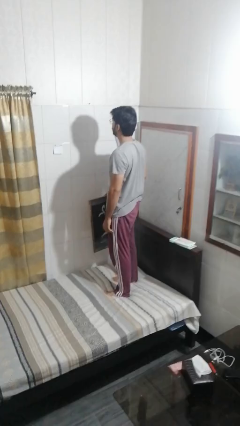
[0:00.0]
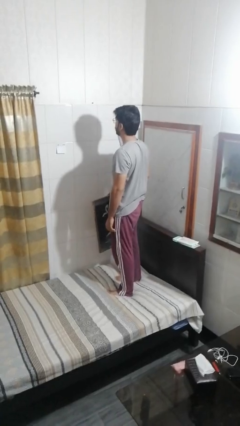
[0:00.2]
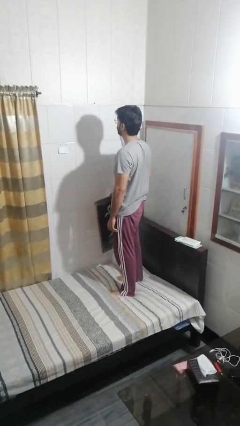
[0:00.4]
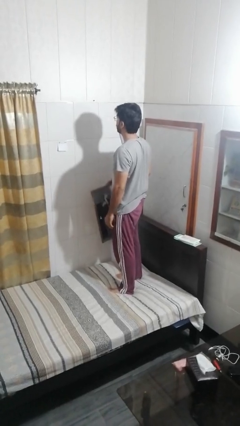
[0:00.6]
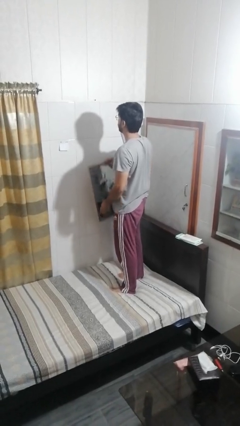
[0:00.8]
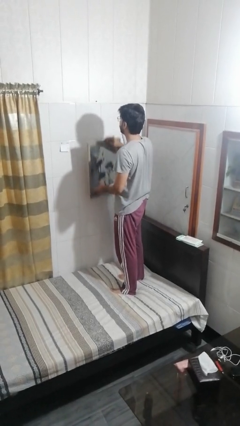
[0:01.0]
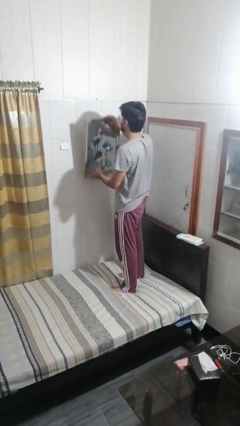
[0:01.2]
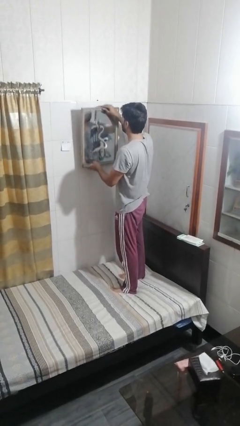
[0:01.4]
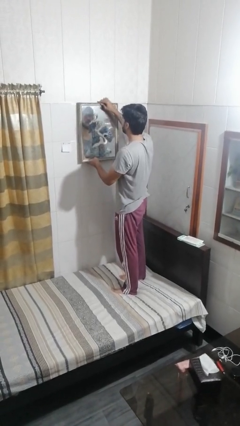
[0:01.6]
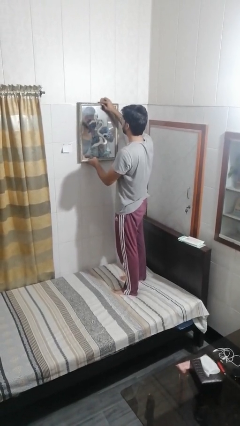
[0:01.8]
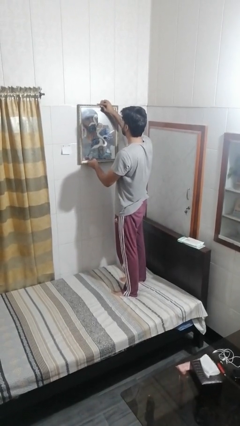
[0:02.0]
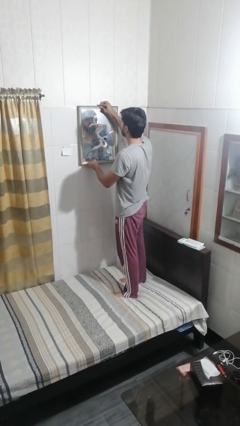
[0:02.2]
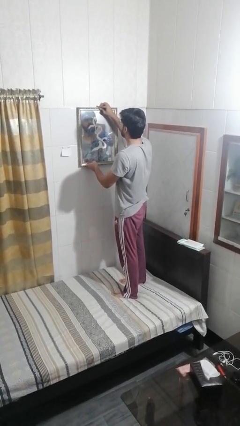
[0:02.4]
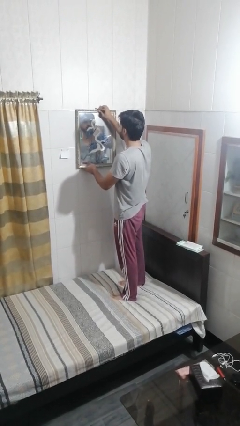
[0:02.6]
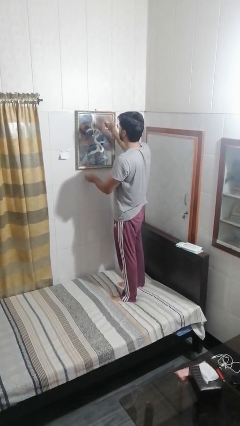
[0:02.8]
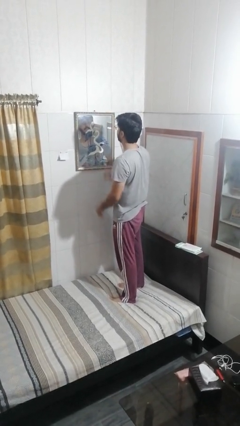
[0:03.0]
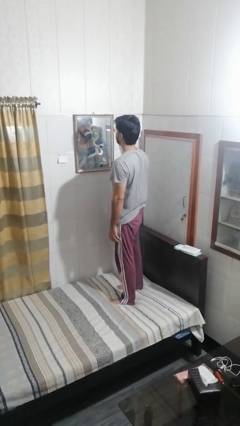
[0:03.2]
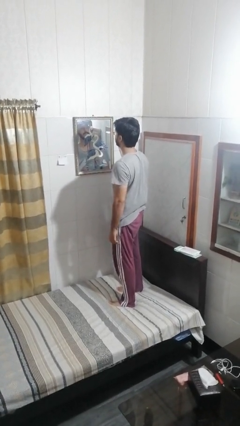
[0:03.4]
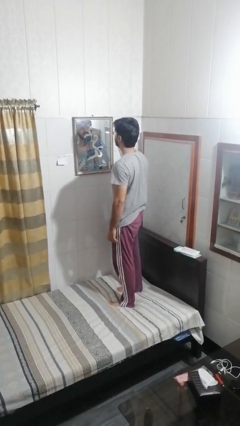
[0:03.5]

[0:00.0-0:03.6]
person puts up picture frame

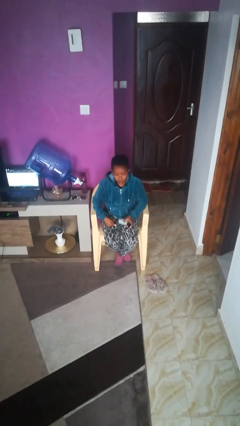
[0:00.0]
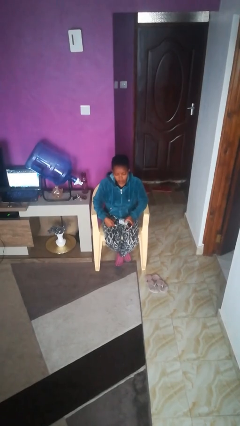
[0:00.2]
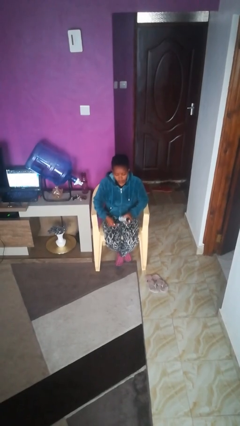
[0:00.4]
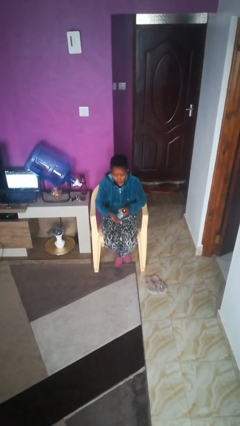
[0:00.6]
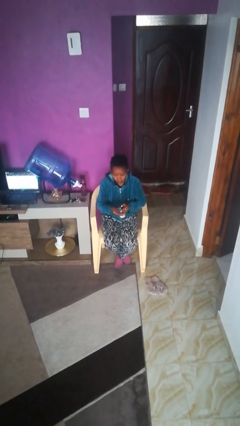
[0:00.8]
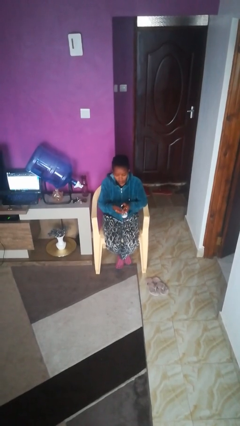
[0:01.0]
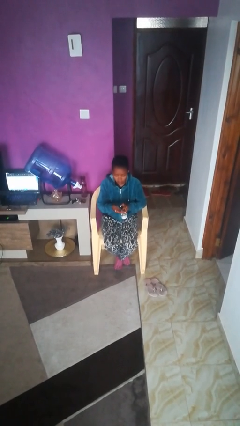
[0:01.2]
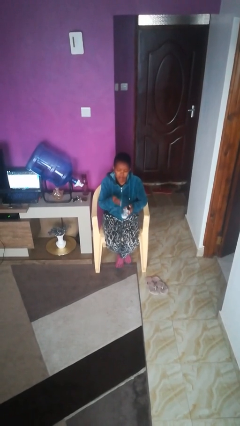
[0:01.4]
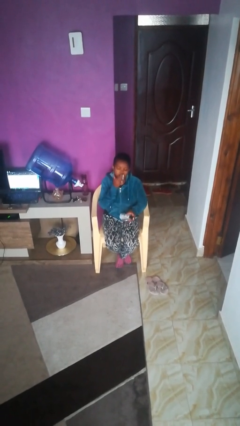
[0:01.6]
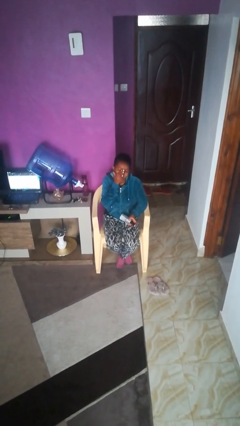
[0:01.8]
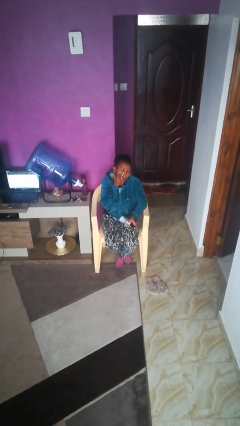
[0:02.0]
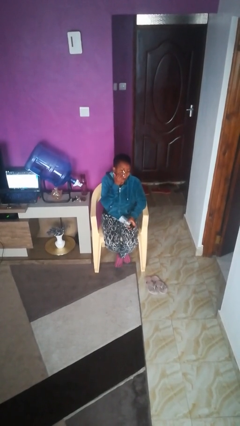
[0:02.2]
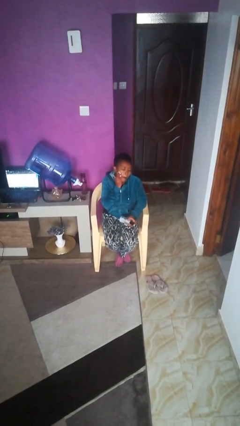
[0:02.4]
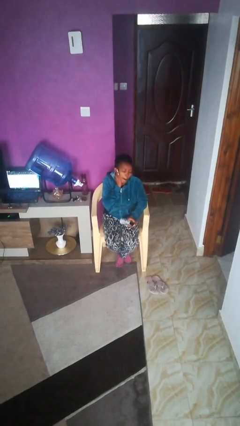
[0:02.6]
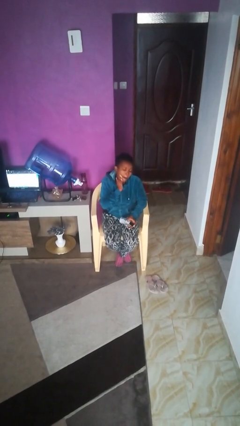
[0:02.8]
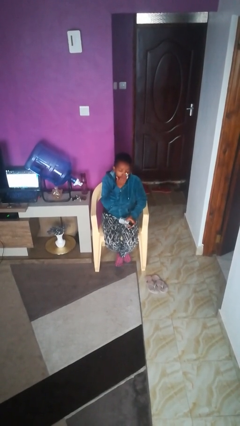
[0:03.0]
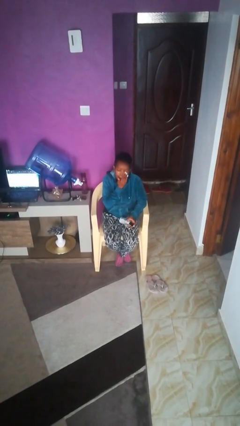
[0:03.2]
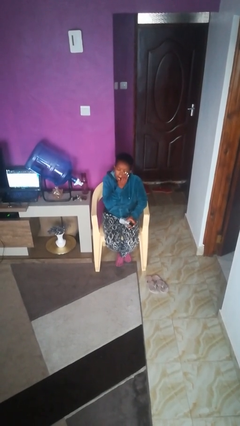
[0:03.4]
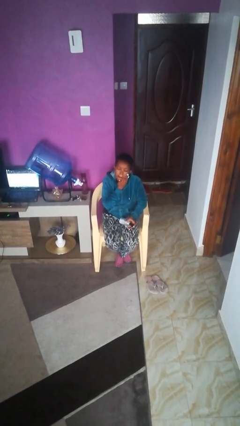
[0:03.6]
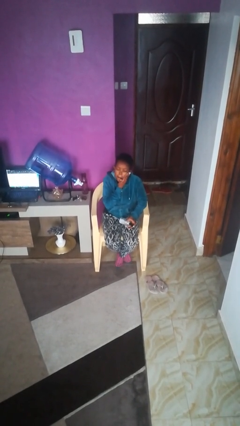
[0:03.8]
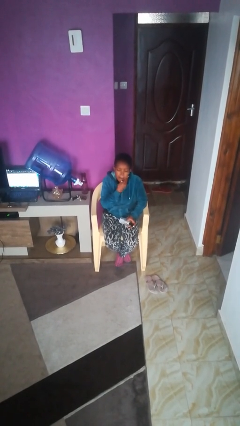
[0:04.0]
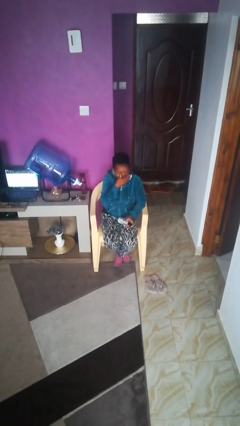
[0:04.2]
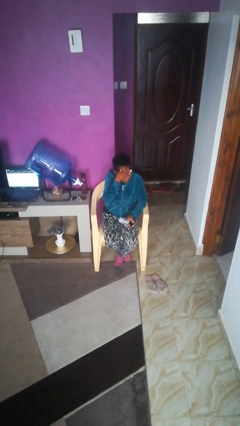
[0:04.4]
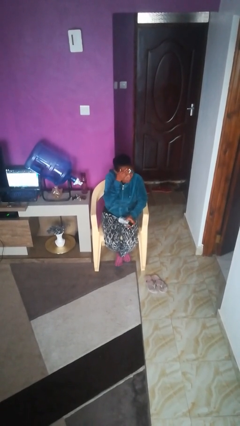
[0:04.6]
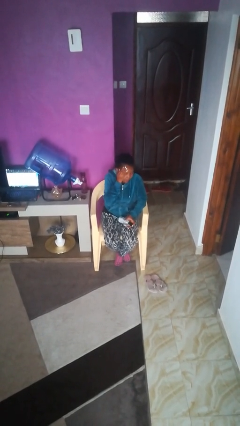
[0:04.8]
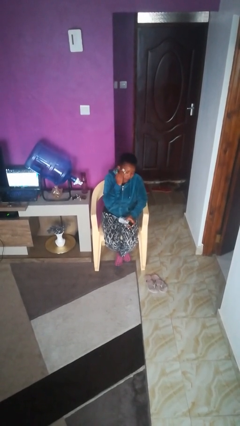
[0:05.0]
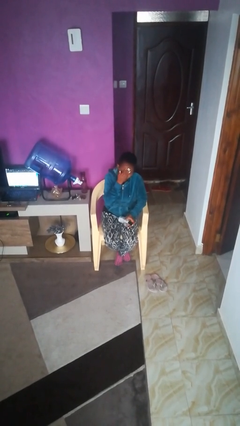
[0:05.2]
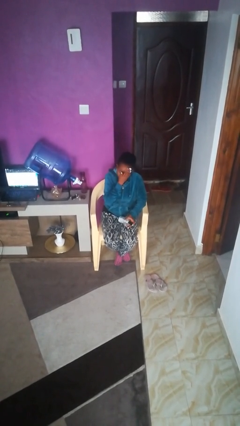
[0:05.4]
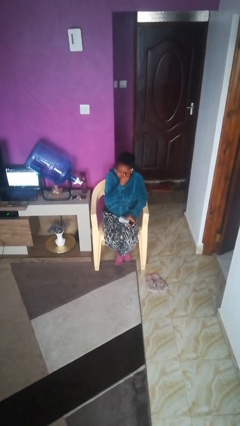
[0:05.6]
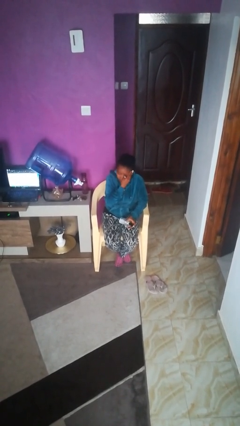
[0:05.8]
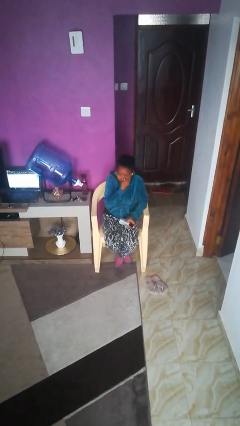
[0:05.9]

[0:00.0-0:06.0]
person applies facial moisturizer

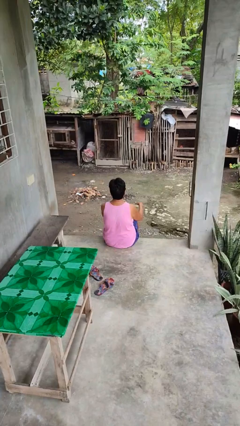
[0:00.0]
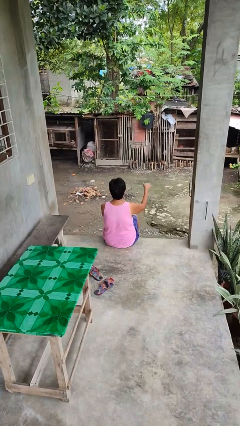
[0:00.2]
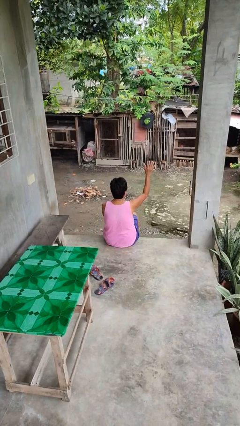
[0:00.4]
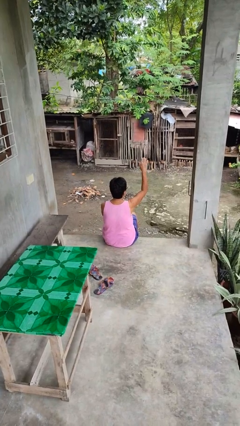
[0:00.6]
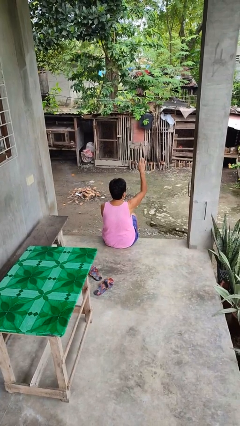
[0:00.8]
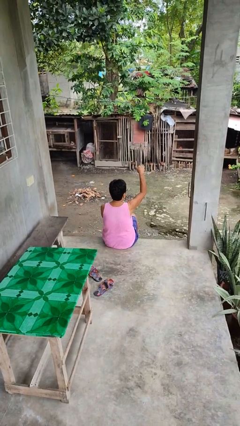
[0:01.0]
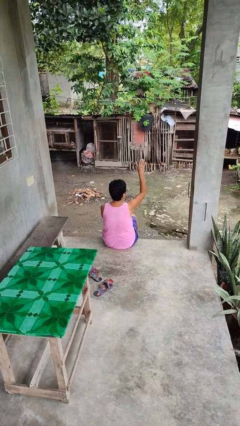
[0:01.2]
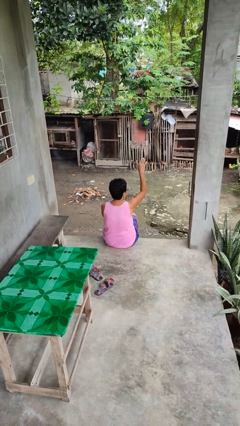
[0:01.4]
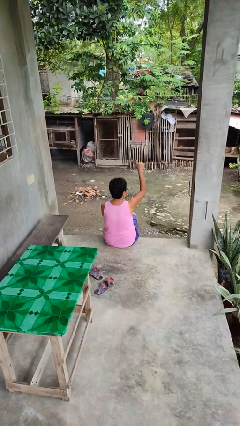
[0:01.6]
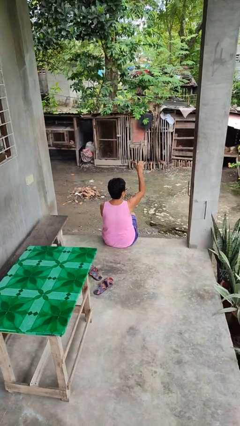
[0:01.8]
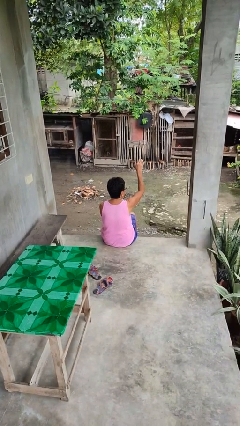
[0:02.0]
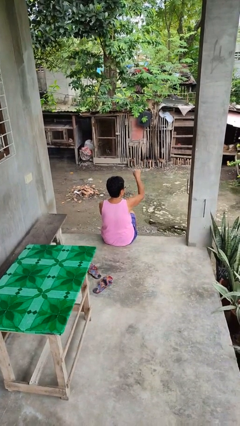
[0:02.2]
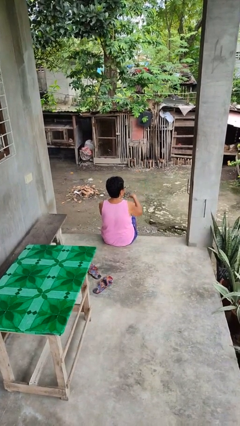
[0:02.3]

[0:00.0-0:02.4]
person gestures come here

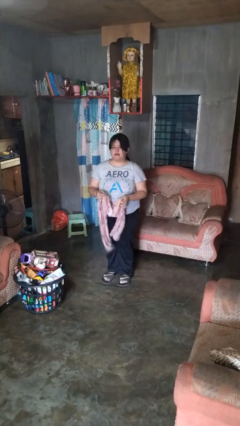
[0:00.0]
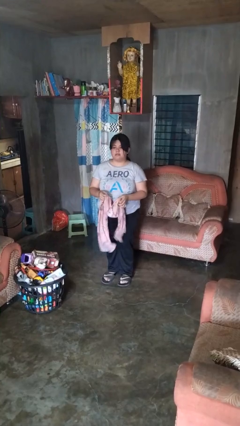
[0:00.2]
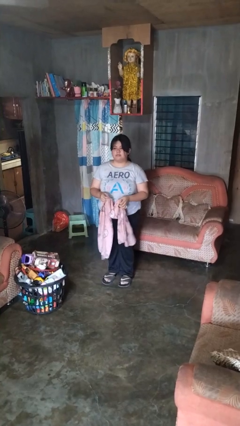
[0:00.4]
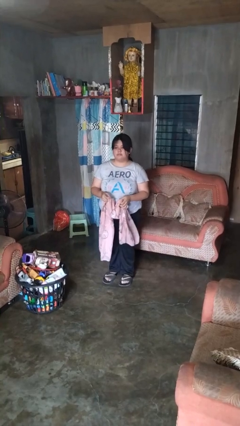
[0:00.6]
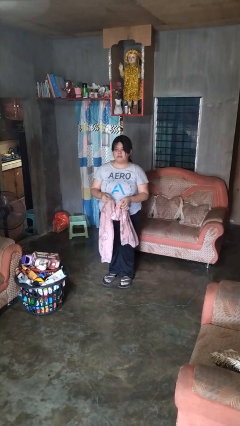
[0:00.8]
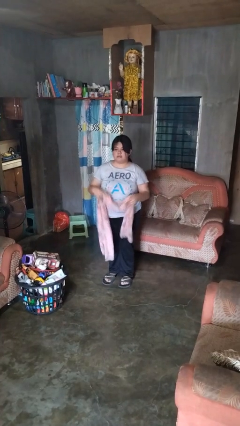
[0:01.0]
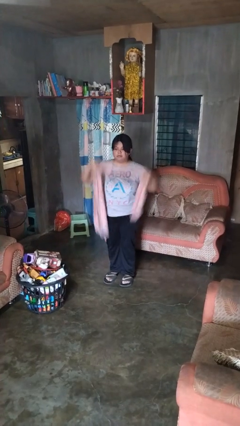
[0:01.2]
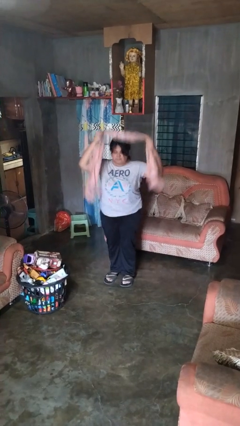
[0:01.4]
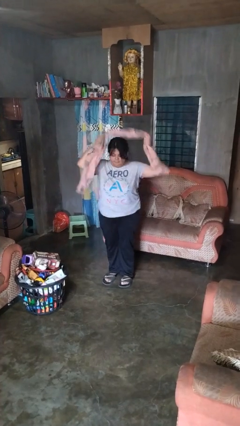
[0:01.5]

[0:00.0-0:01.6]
person puts on scarf

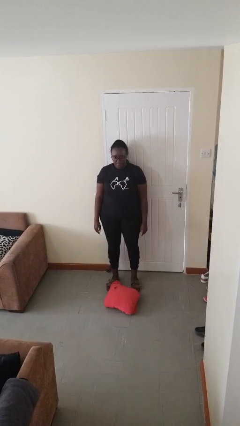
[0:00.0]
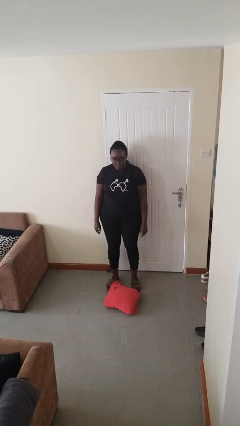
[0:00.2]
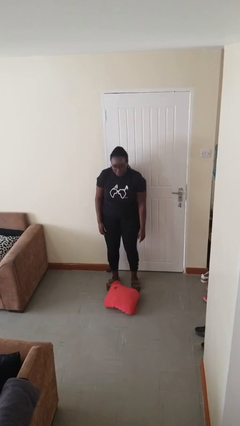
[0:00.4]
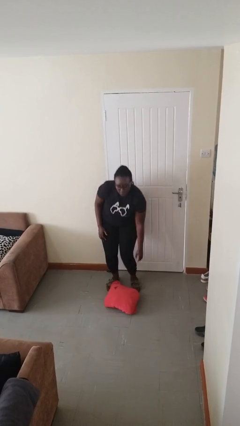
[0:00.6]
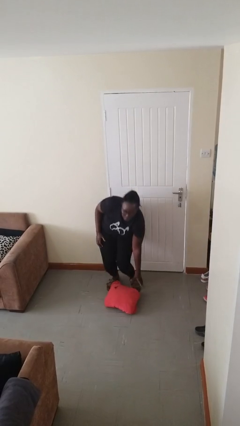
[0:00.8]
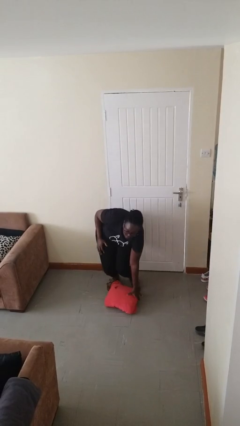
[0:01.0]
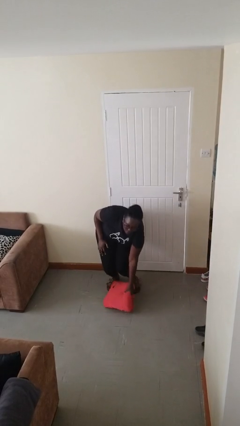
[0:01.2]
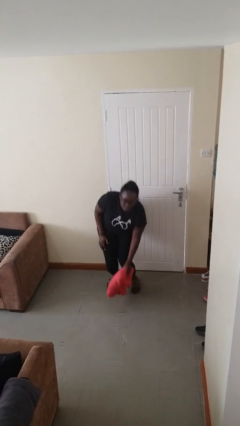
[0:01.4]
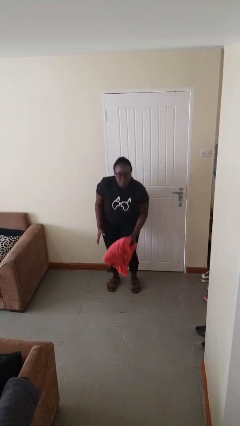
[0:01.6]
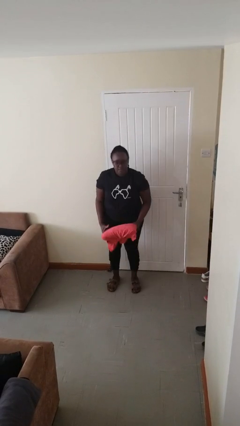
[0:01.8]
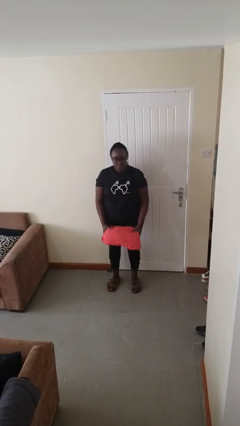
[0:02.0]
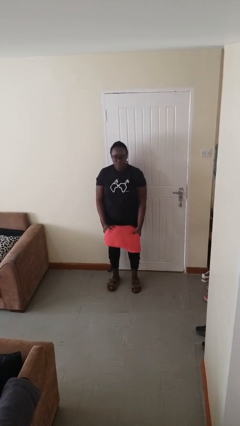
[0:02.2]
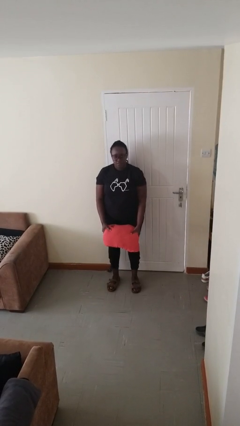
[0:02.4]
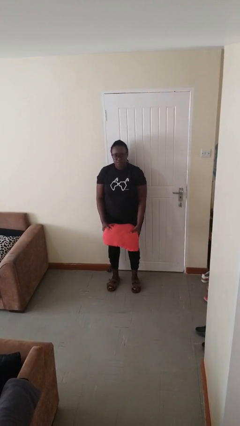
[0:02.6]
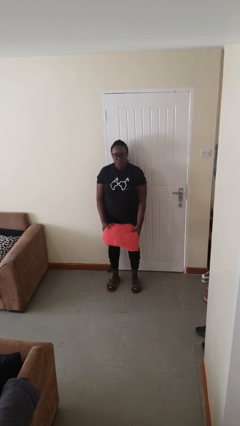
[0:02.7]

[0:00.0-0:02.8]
person picks up object from floor

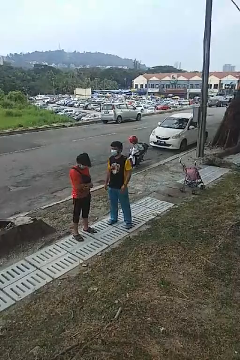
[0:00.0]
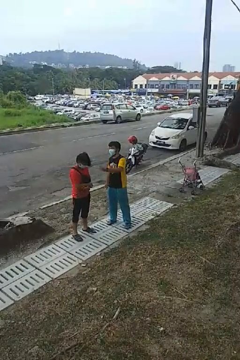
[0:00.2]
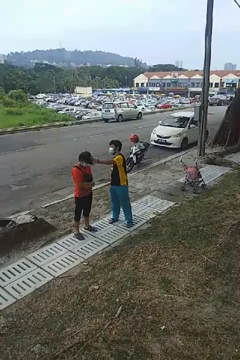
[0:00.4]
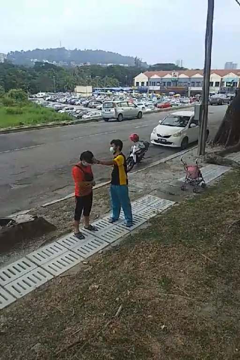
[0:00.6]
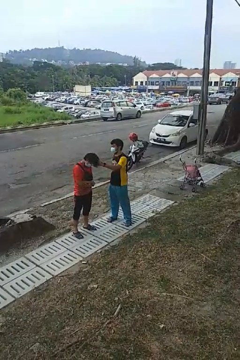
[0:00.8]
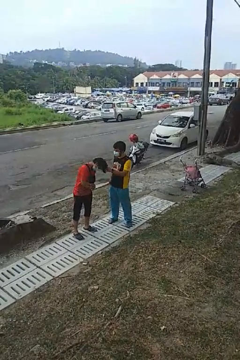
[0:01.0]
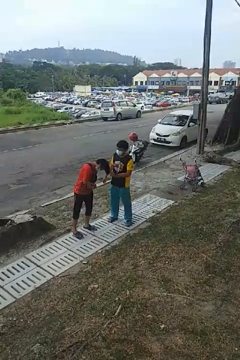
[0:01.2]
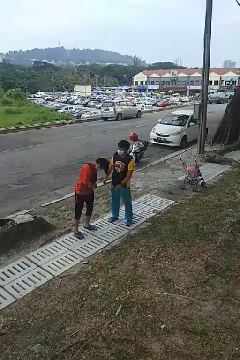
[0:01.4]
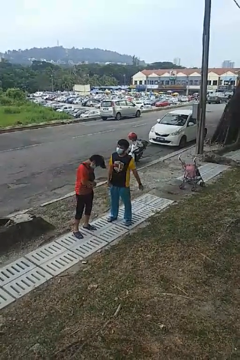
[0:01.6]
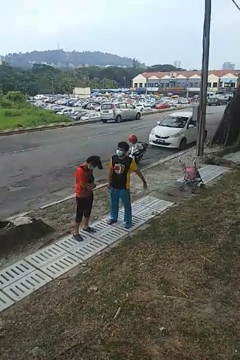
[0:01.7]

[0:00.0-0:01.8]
person grabs person by hair
